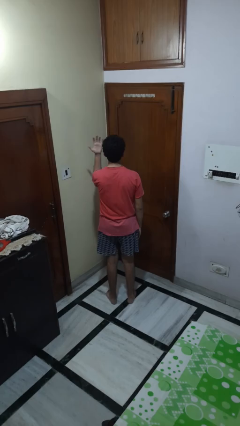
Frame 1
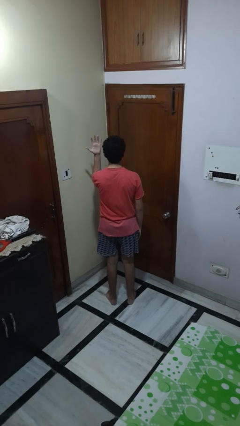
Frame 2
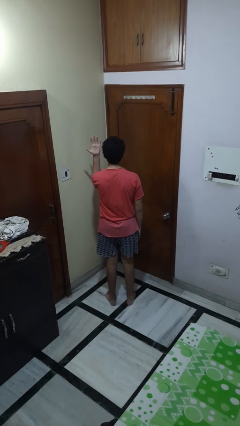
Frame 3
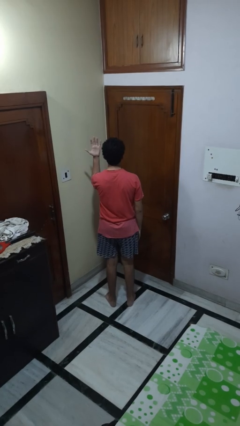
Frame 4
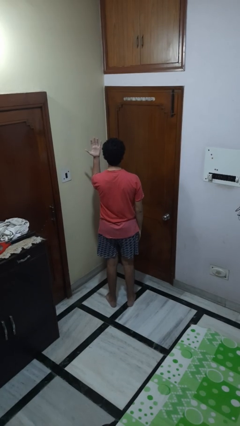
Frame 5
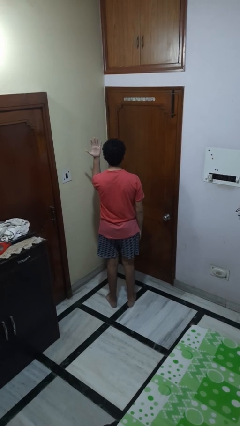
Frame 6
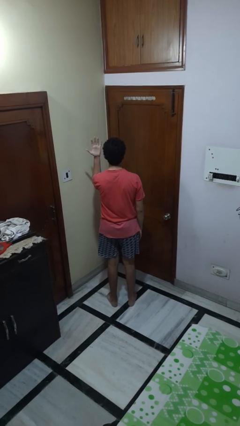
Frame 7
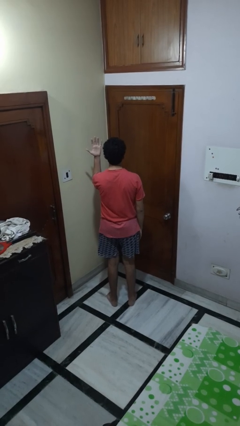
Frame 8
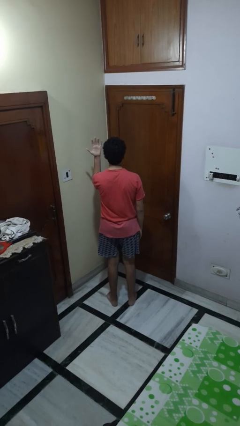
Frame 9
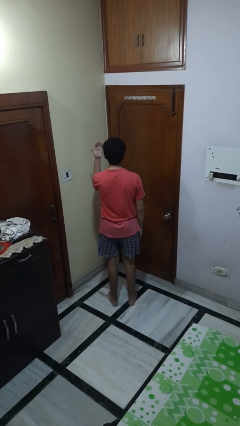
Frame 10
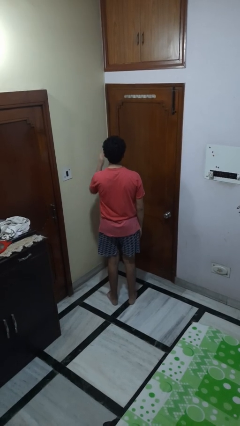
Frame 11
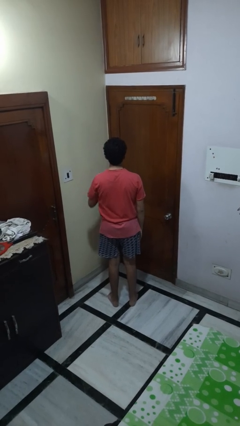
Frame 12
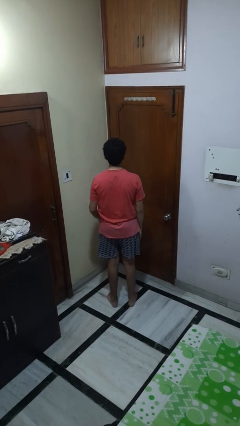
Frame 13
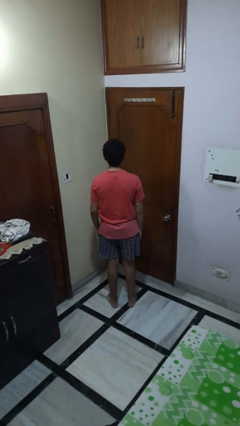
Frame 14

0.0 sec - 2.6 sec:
person gestures number five

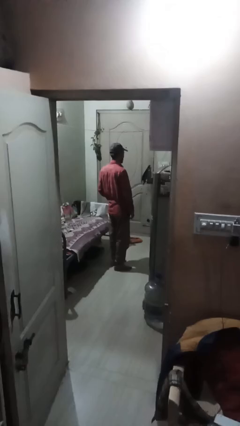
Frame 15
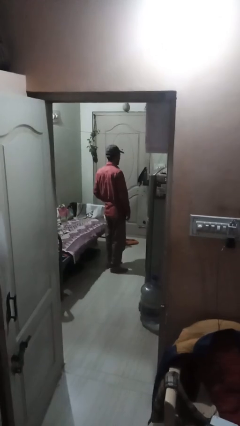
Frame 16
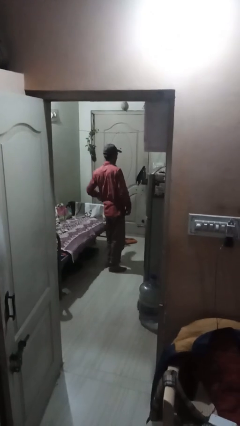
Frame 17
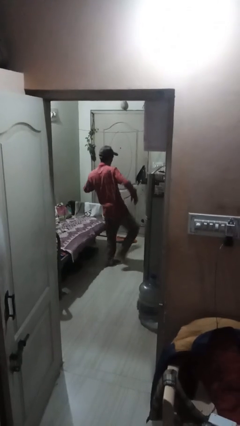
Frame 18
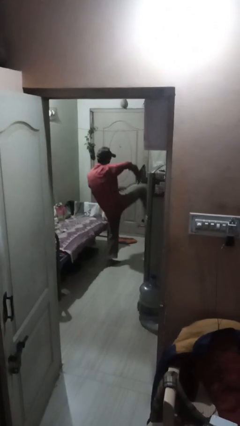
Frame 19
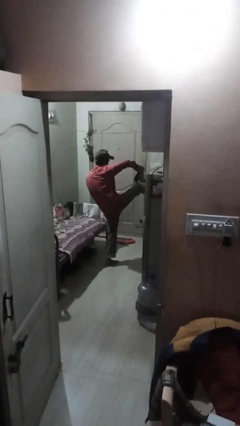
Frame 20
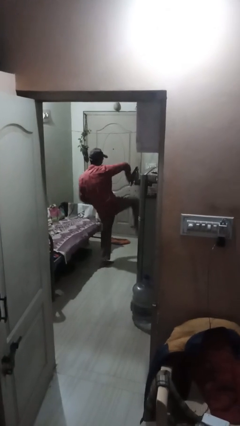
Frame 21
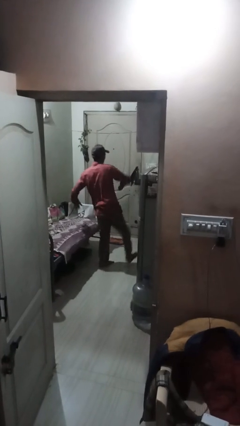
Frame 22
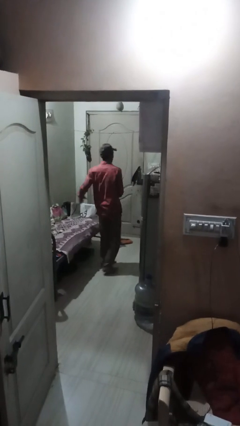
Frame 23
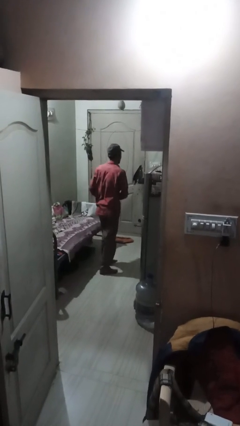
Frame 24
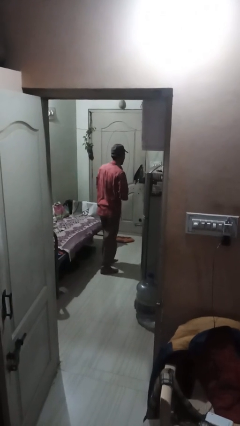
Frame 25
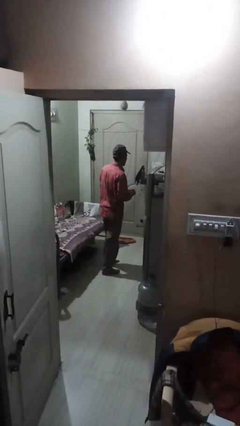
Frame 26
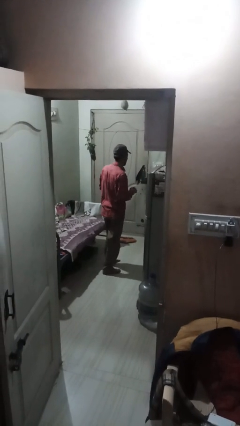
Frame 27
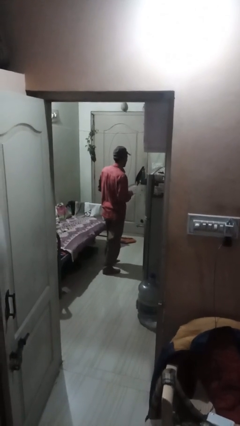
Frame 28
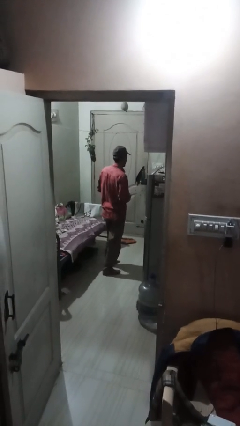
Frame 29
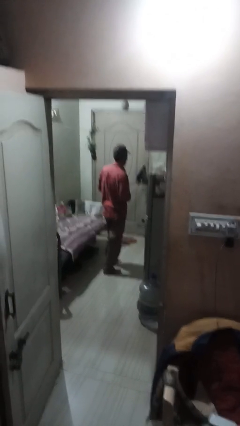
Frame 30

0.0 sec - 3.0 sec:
person karate kicks

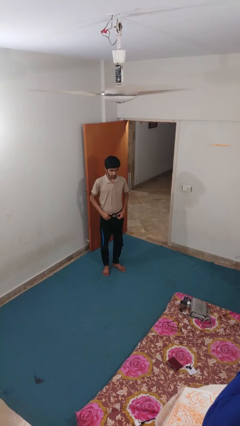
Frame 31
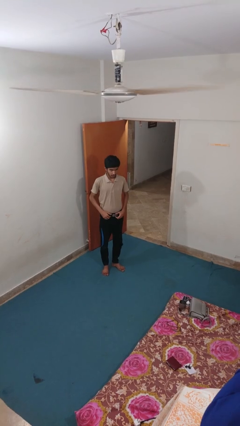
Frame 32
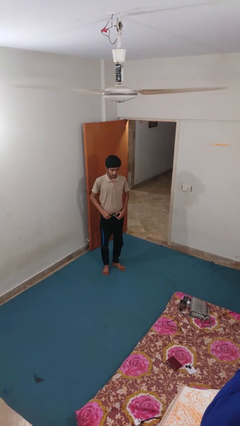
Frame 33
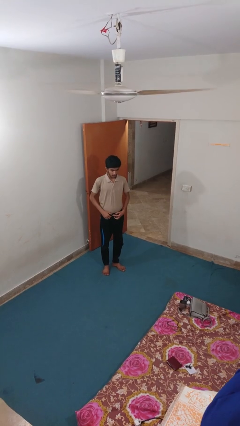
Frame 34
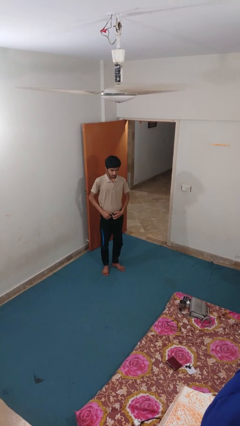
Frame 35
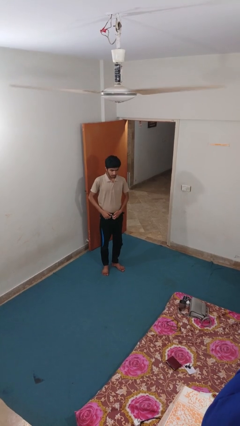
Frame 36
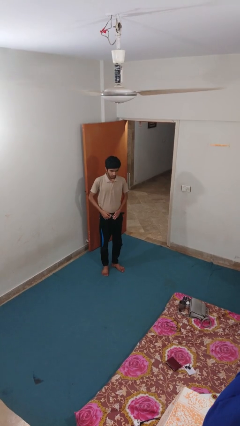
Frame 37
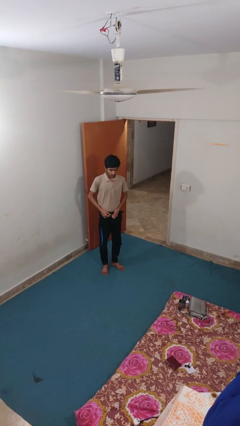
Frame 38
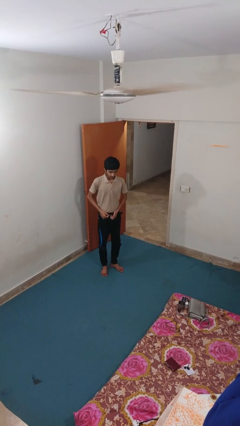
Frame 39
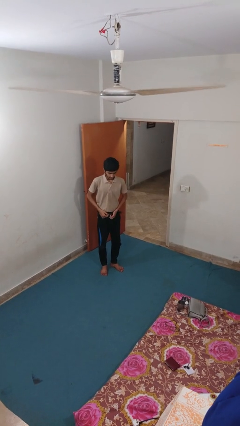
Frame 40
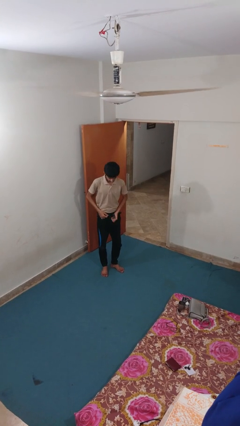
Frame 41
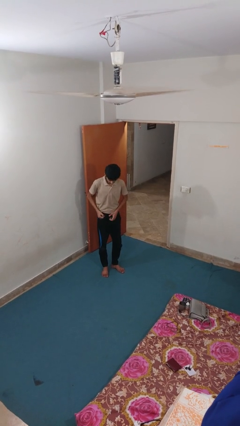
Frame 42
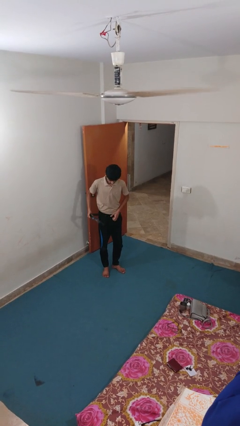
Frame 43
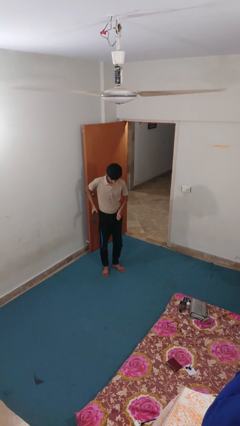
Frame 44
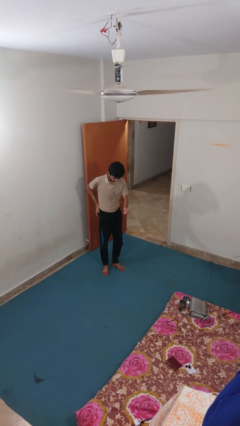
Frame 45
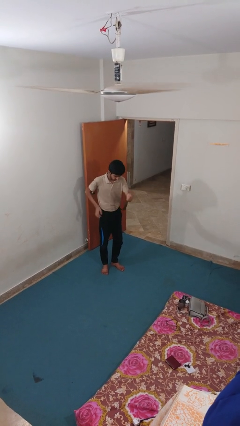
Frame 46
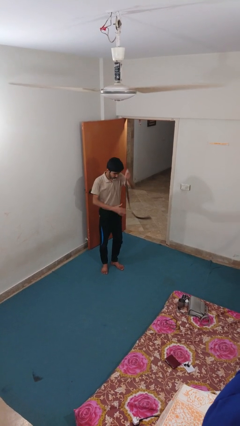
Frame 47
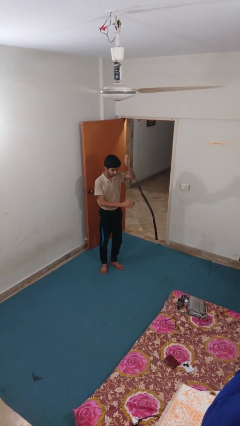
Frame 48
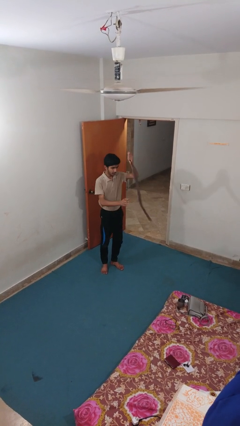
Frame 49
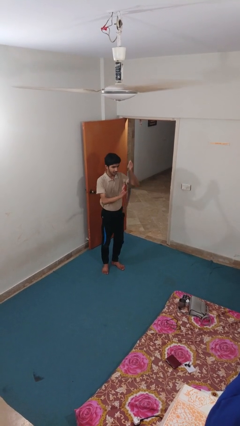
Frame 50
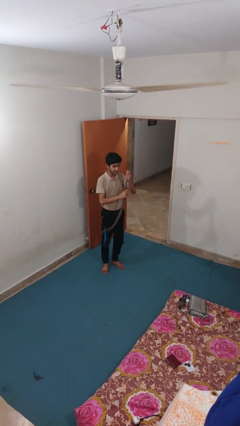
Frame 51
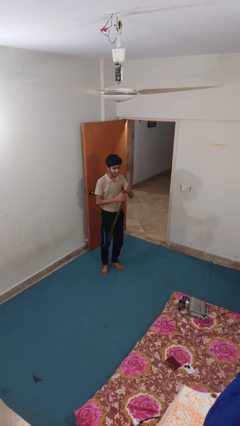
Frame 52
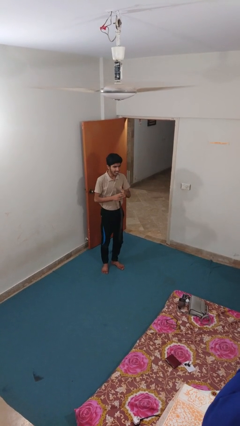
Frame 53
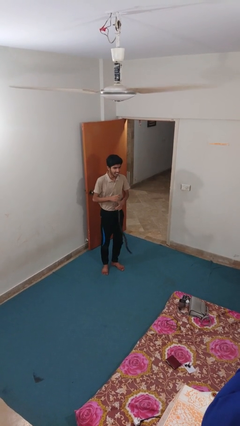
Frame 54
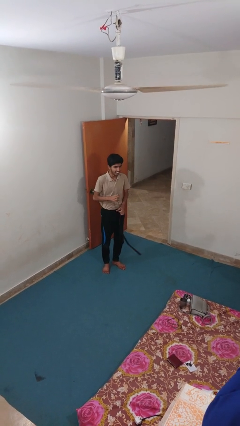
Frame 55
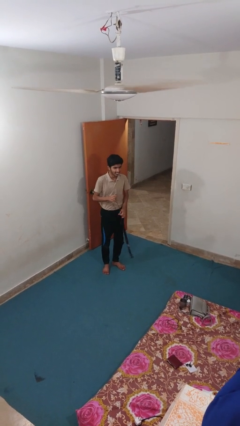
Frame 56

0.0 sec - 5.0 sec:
person takes off belt

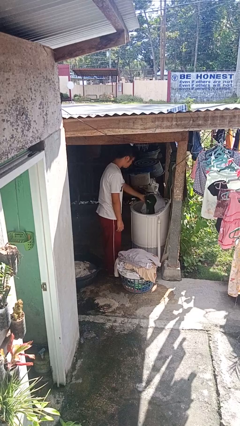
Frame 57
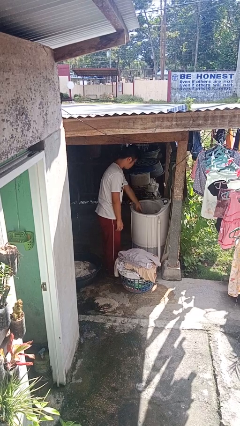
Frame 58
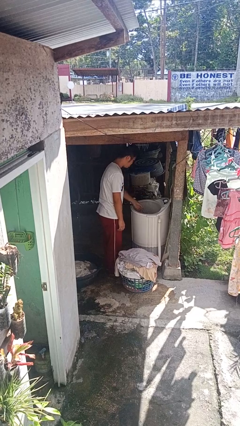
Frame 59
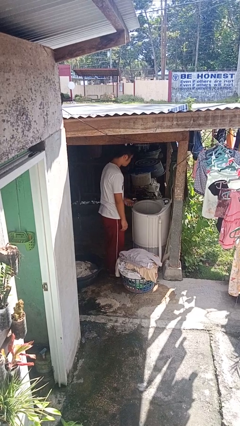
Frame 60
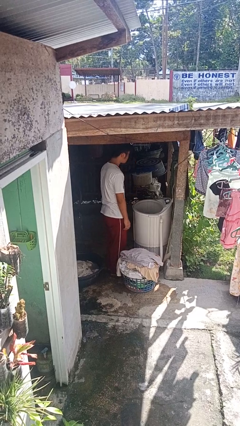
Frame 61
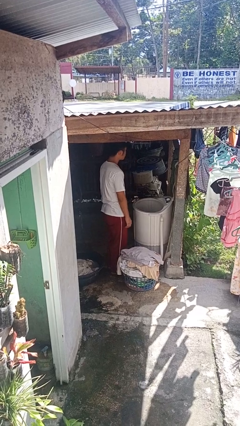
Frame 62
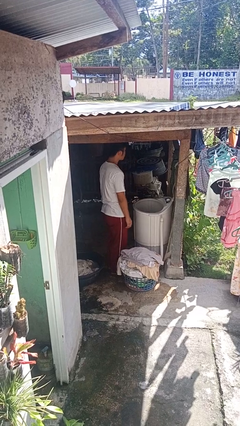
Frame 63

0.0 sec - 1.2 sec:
person loads clotheswasher

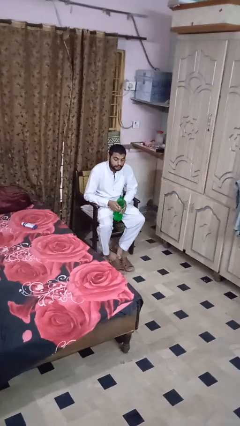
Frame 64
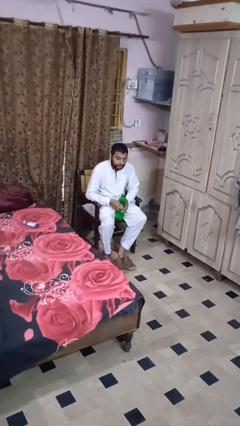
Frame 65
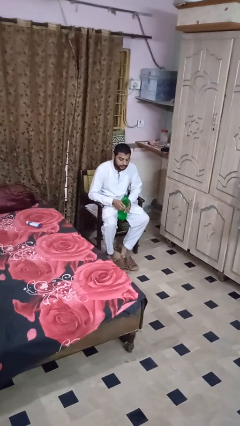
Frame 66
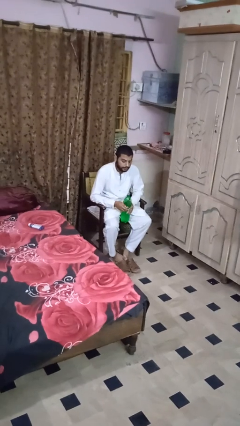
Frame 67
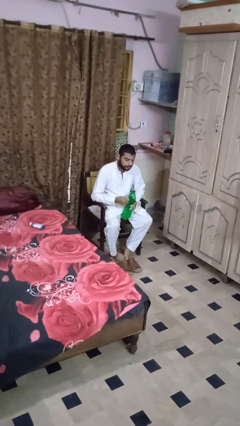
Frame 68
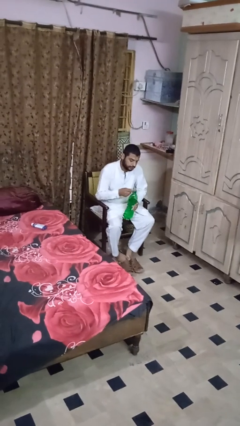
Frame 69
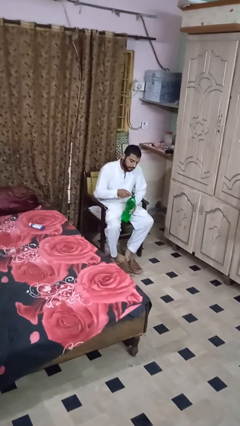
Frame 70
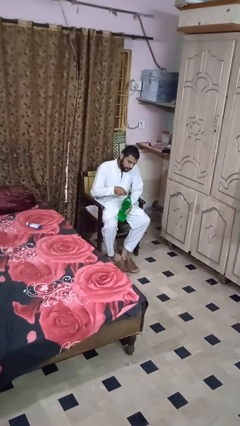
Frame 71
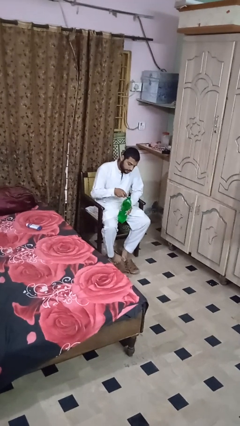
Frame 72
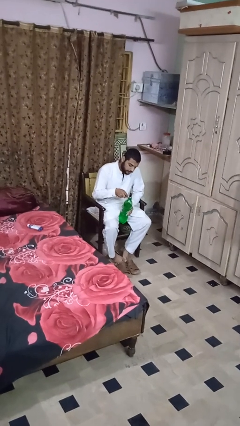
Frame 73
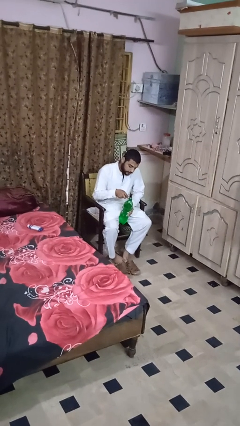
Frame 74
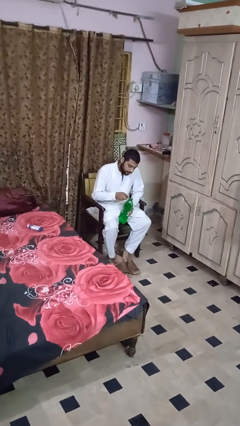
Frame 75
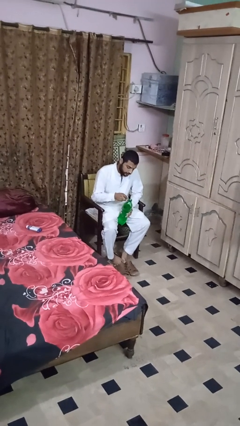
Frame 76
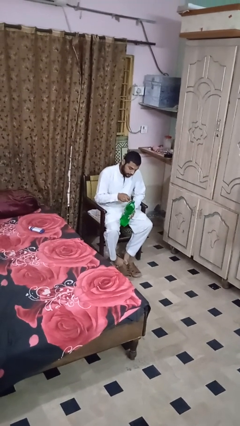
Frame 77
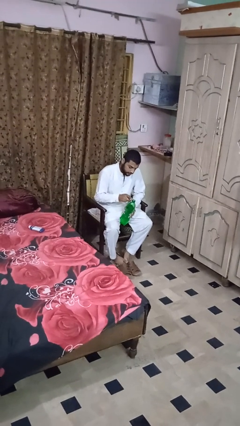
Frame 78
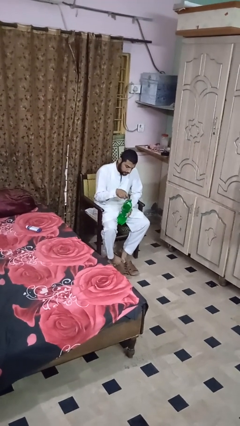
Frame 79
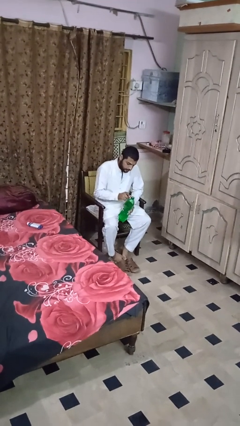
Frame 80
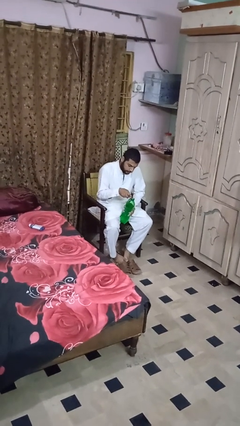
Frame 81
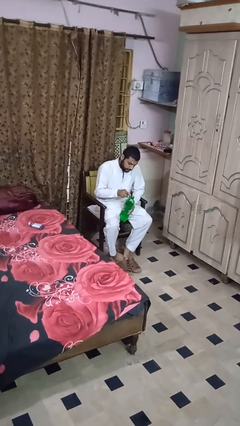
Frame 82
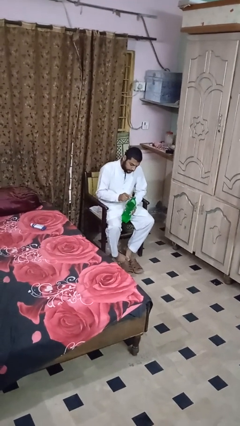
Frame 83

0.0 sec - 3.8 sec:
person opens can with can opener

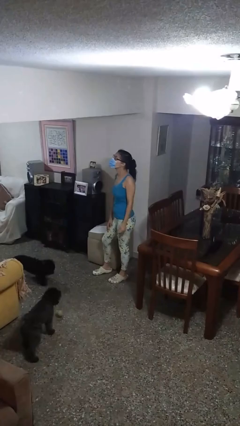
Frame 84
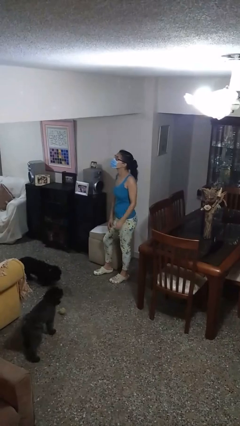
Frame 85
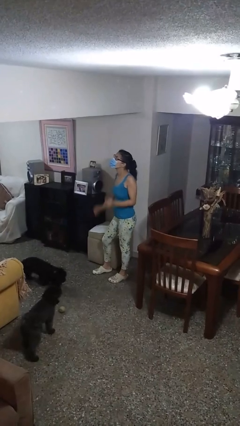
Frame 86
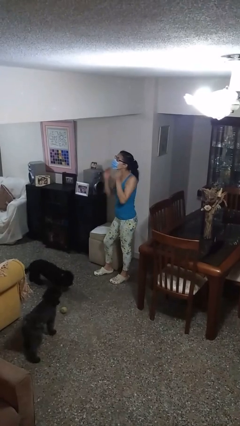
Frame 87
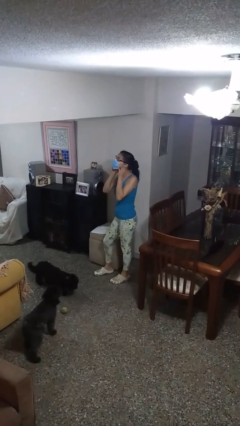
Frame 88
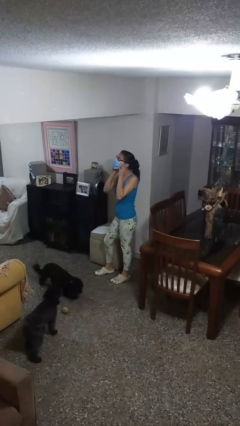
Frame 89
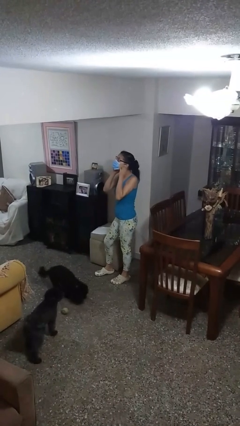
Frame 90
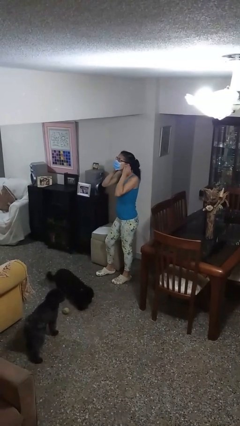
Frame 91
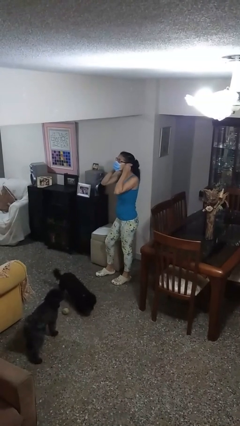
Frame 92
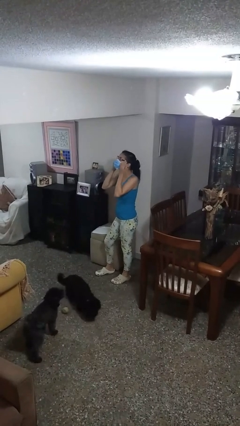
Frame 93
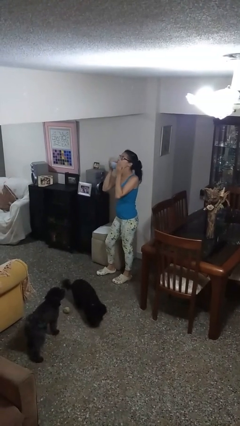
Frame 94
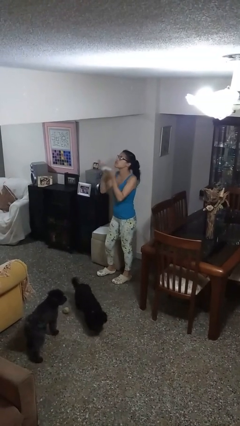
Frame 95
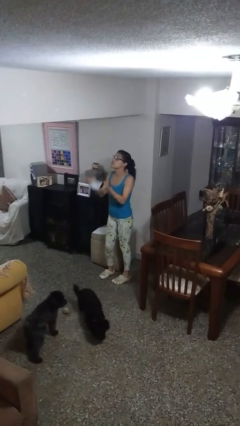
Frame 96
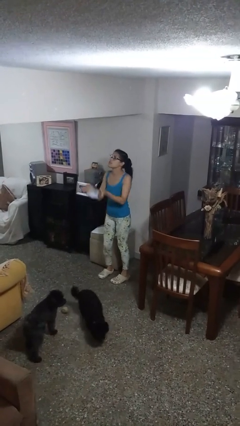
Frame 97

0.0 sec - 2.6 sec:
person takes off facemask
